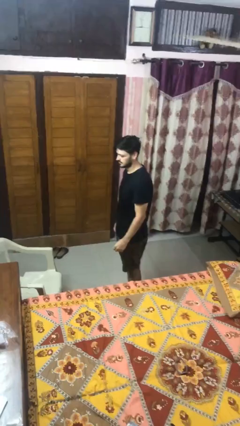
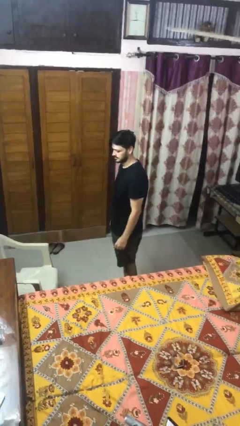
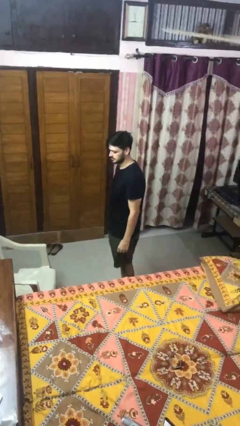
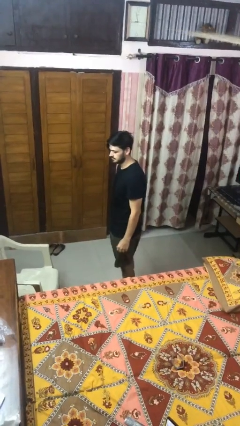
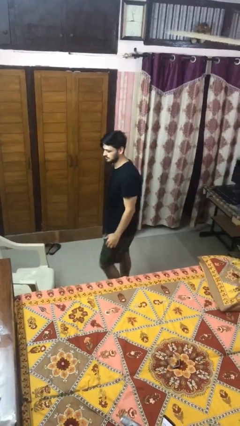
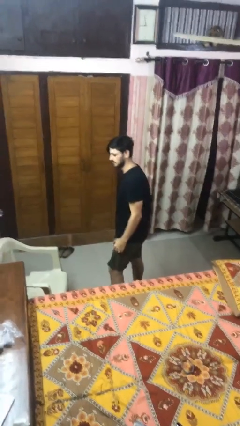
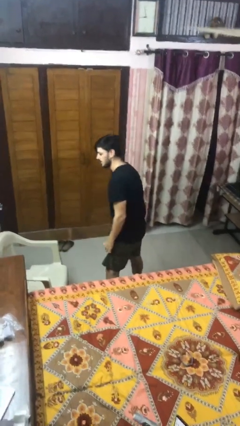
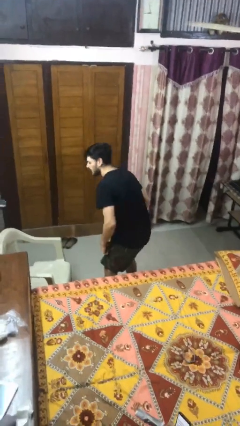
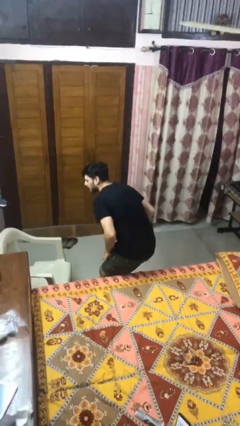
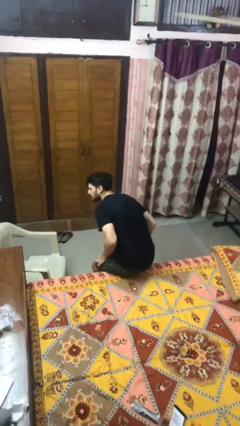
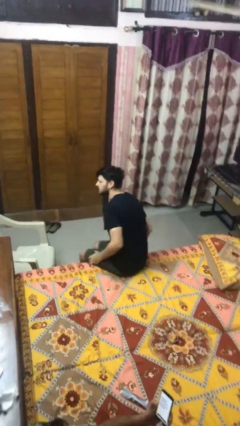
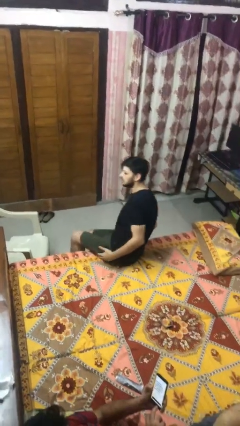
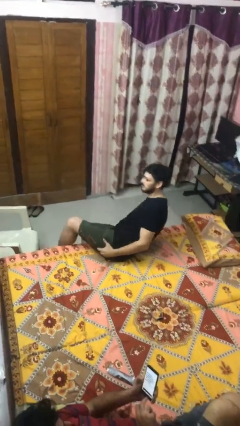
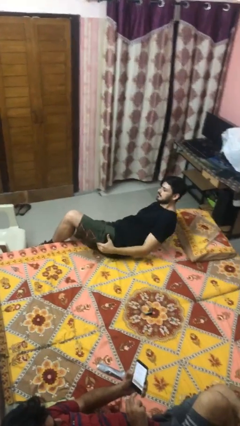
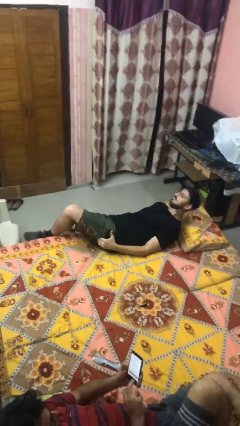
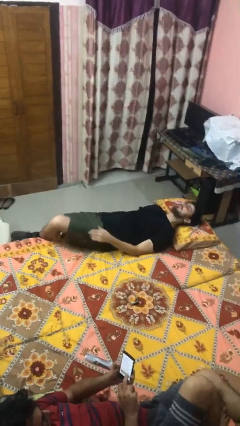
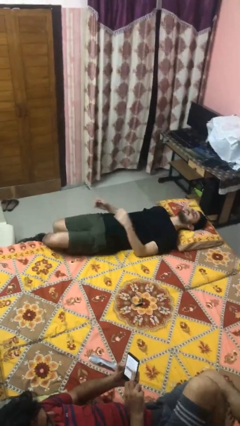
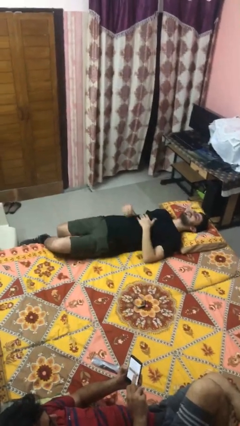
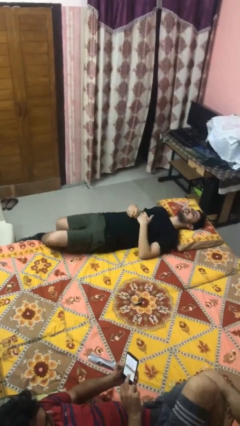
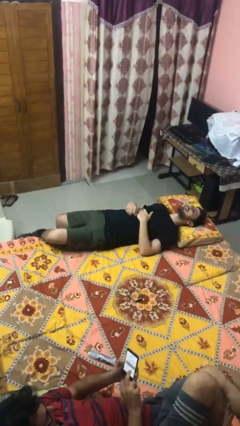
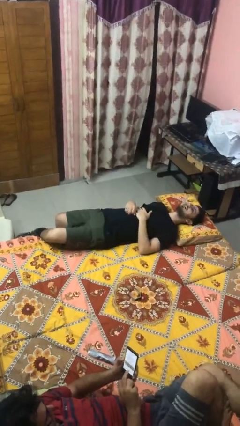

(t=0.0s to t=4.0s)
person lies down on bed

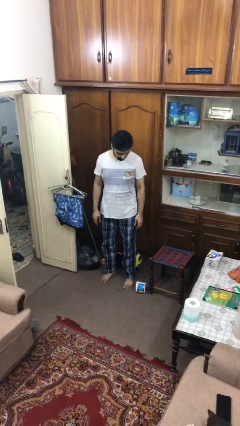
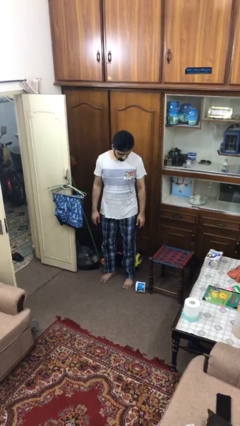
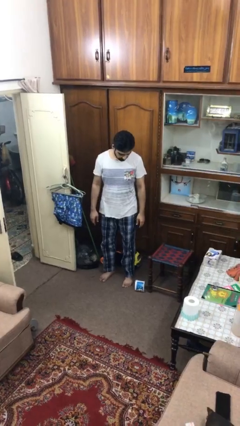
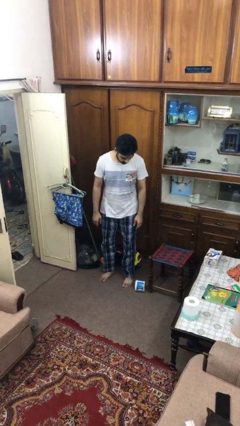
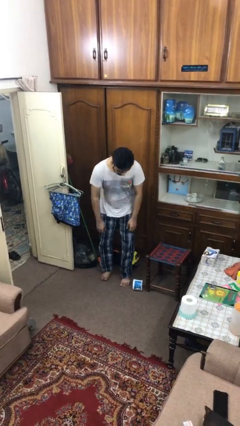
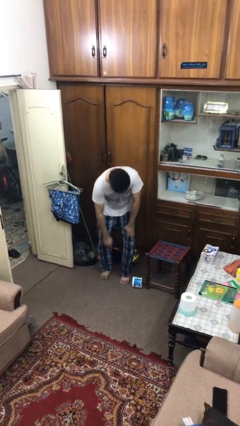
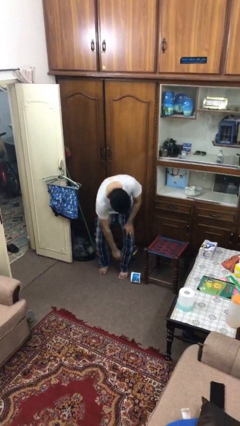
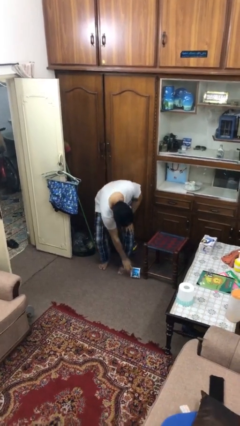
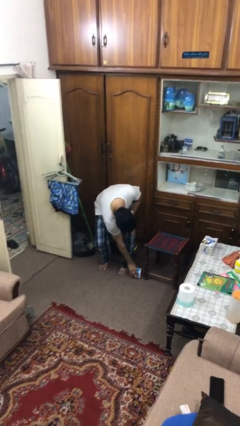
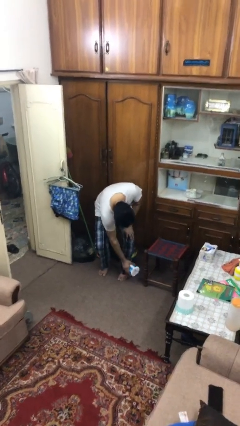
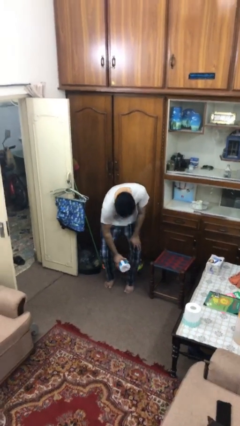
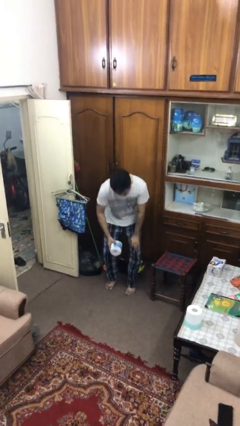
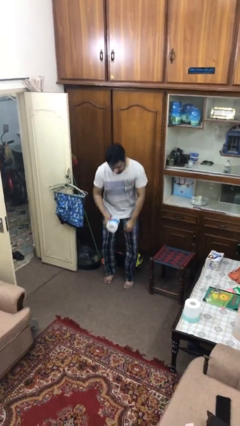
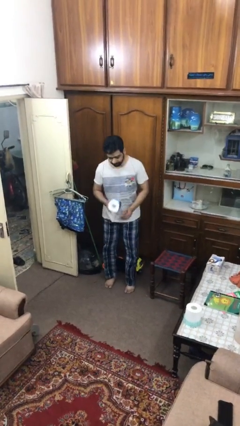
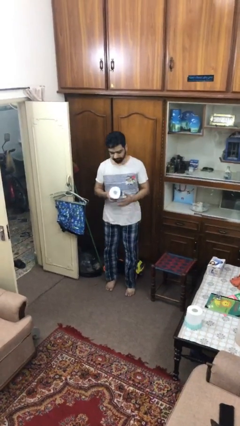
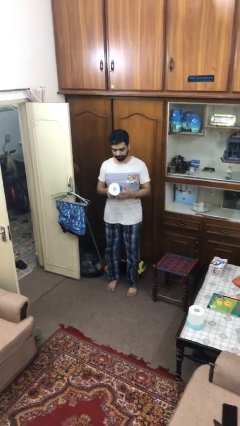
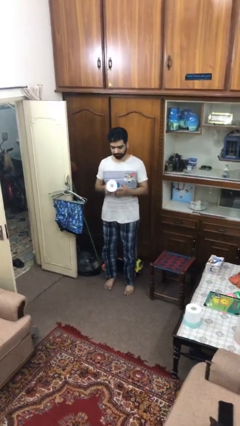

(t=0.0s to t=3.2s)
person picks up object from floor

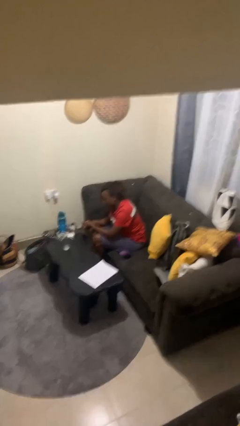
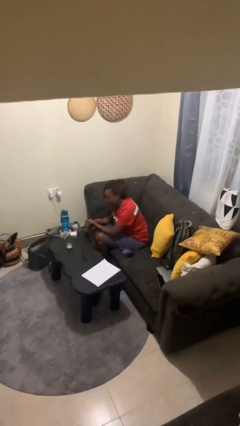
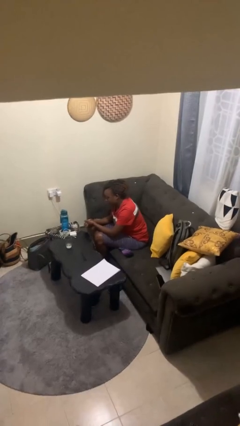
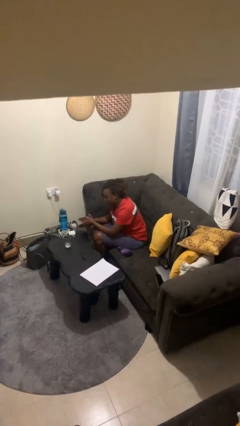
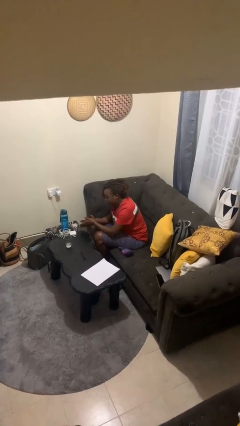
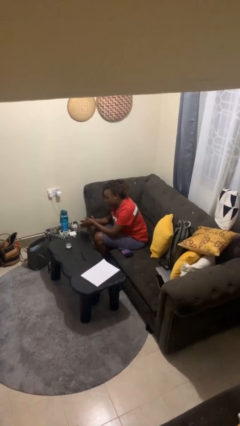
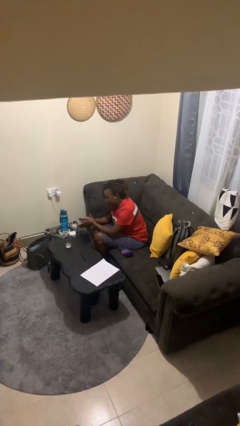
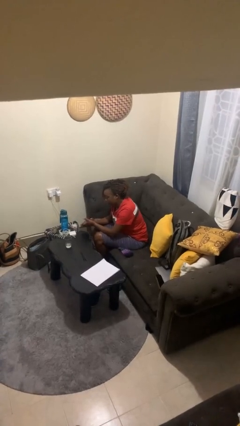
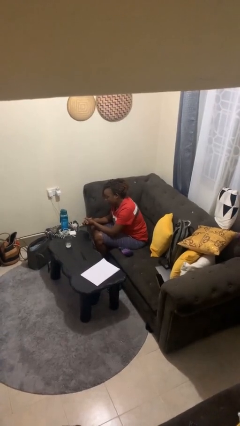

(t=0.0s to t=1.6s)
person claps hands

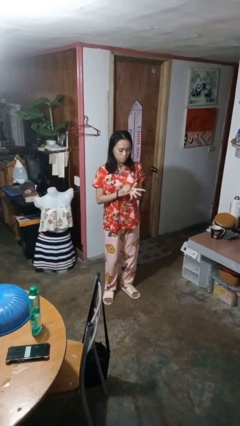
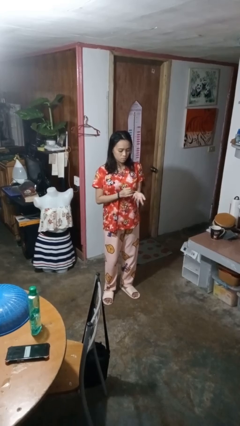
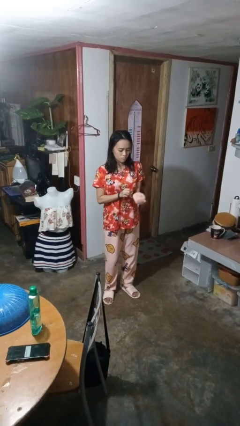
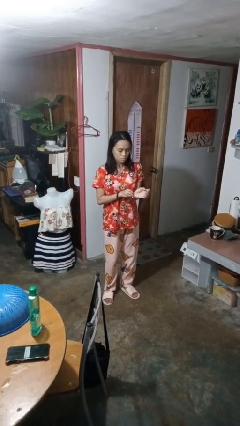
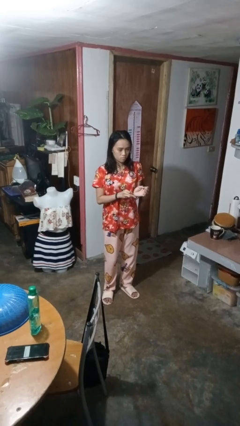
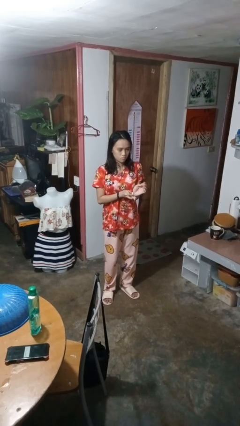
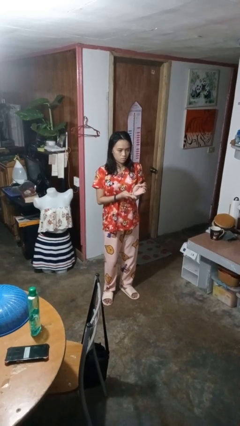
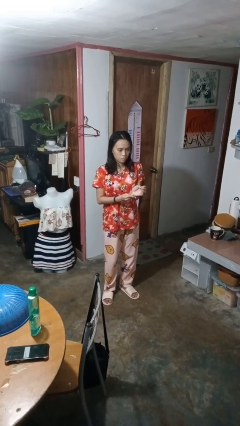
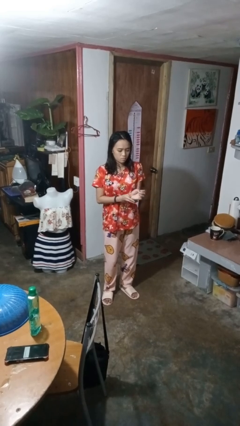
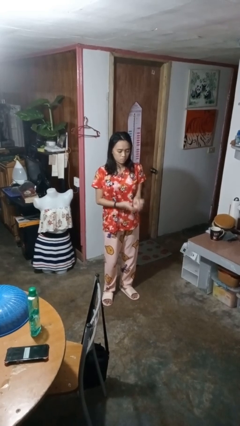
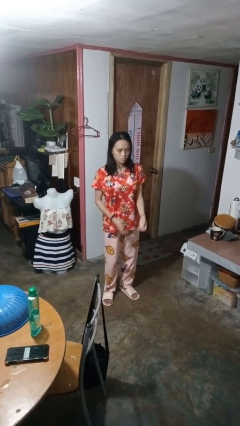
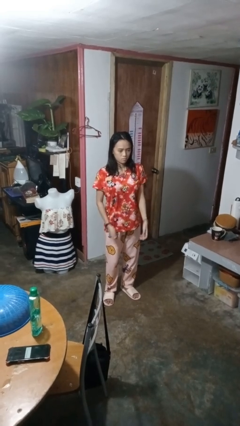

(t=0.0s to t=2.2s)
person puts on wristwatch

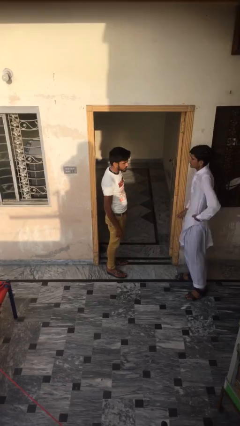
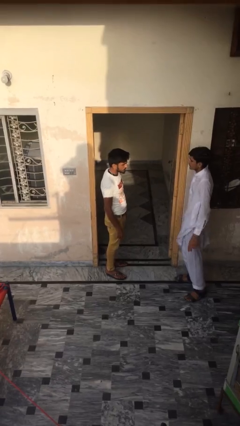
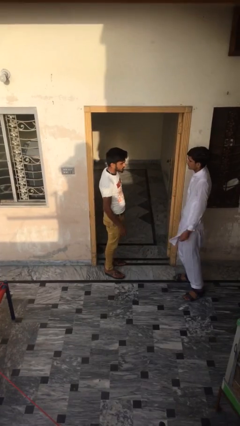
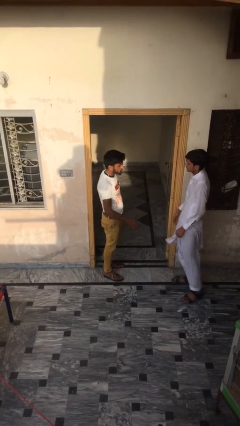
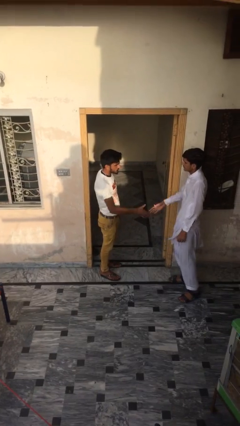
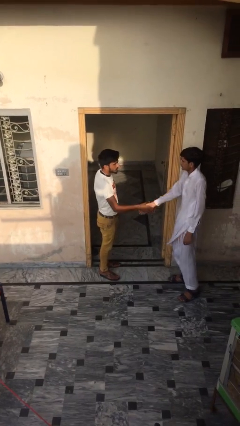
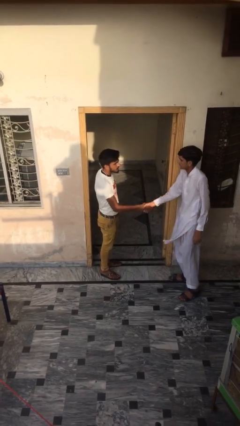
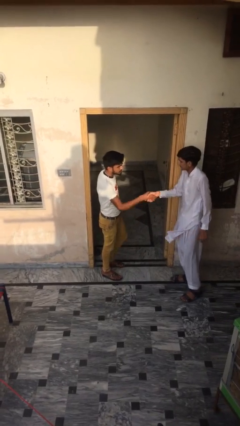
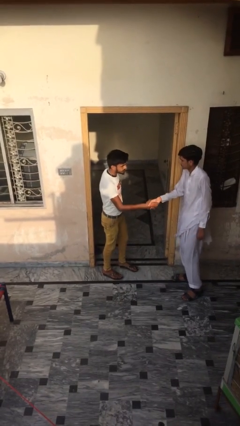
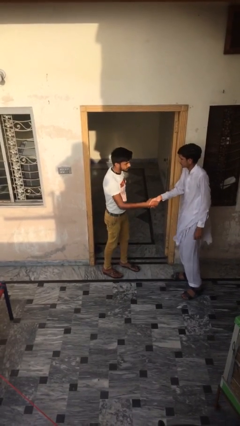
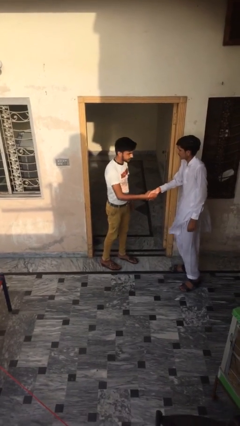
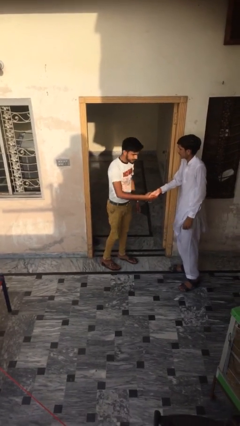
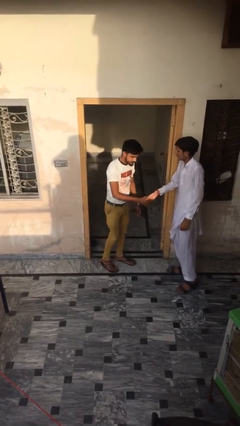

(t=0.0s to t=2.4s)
person shakes hand

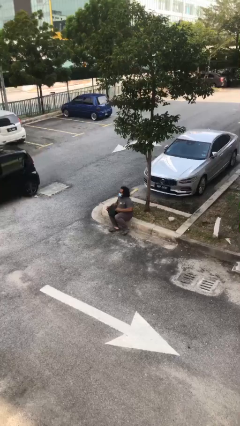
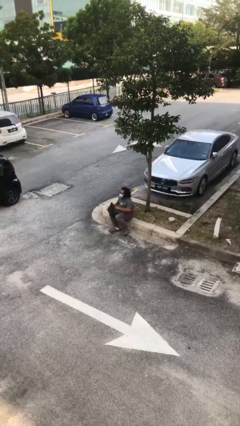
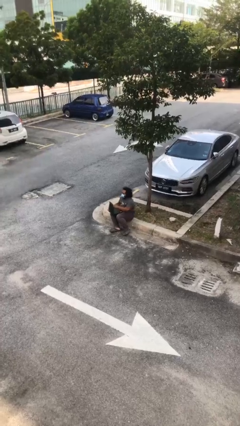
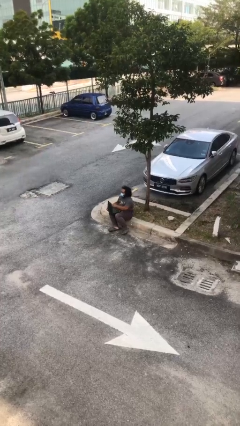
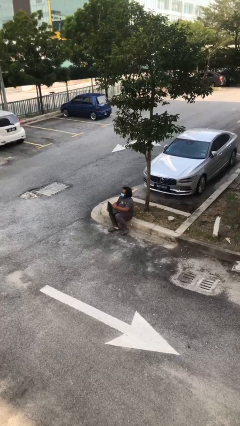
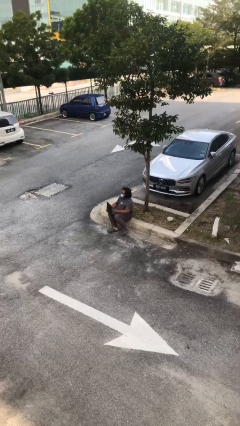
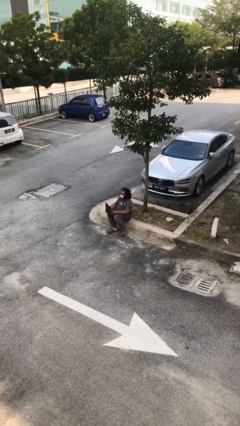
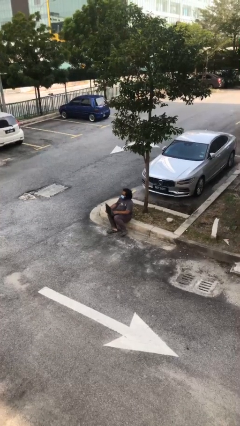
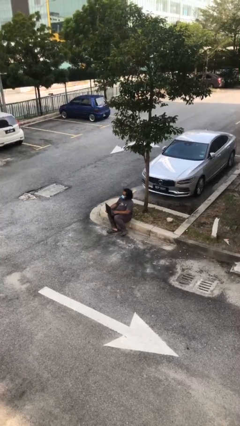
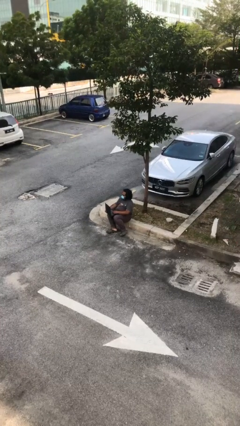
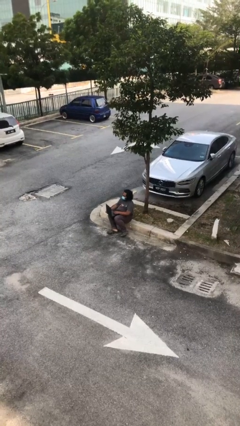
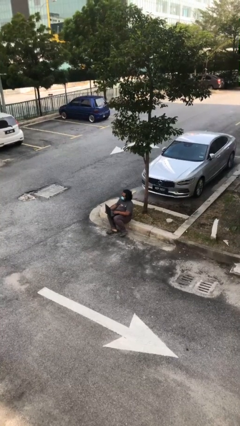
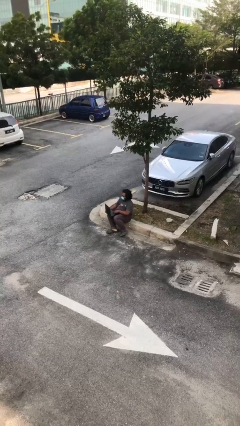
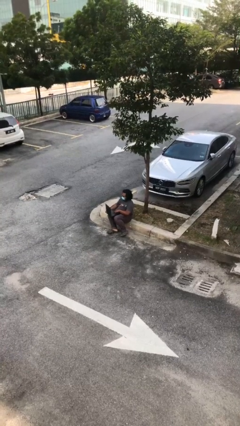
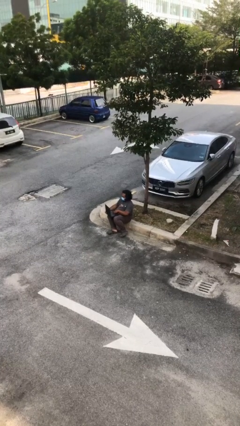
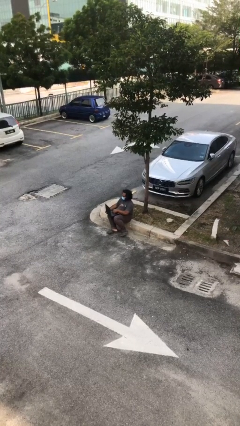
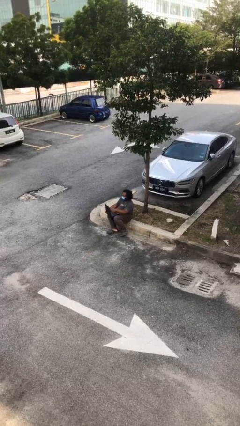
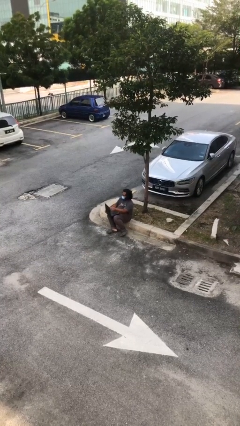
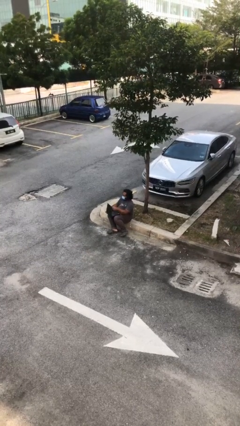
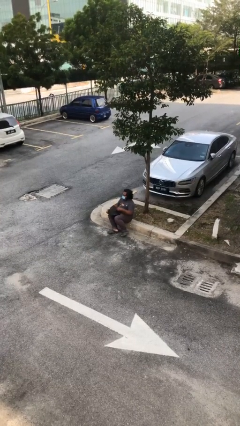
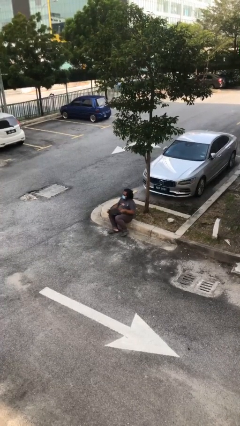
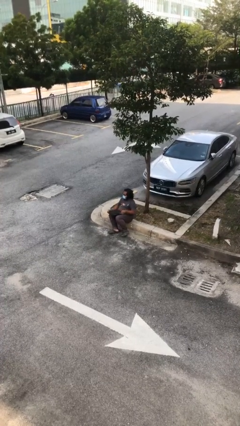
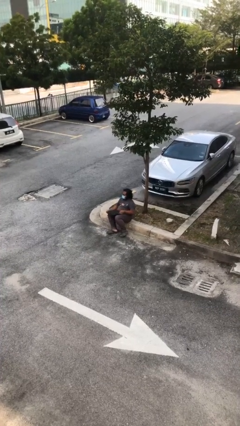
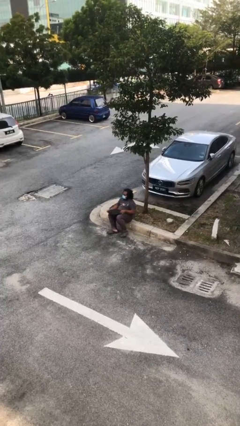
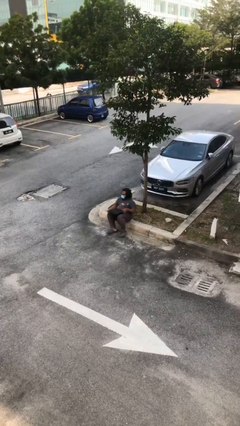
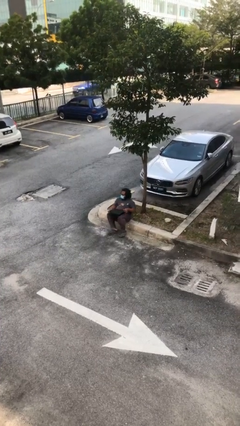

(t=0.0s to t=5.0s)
person interacts with laptop
